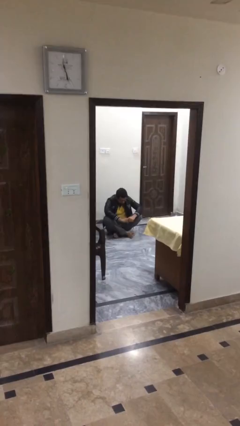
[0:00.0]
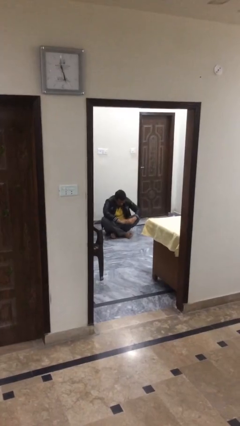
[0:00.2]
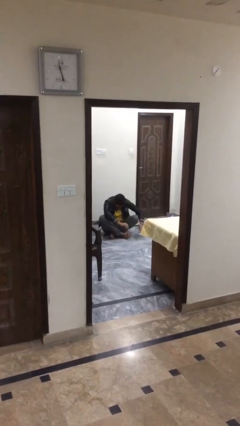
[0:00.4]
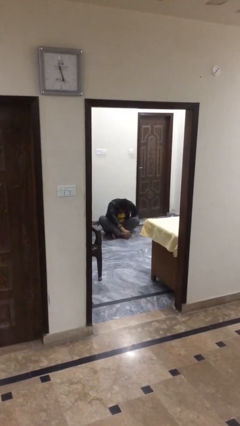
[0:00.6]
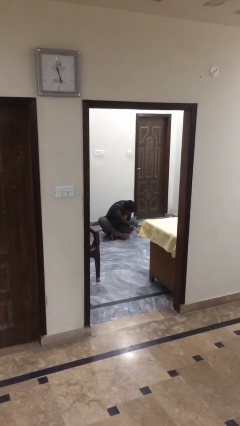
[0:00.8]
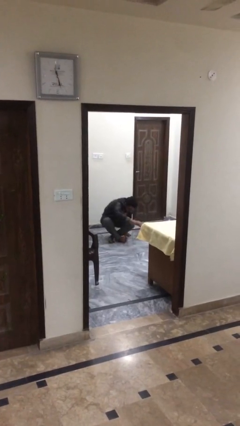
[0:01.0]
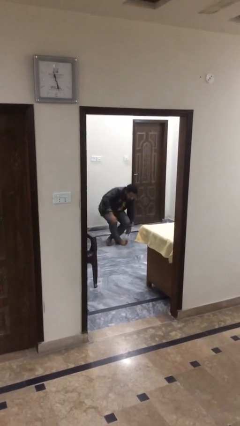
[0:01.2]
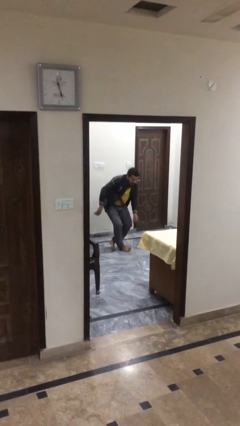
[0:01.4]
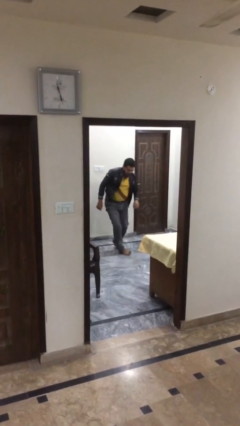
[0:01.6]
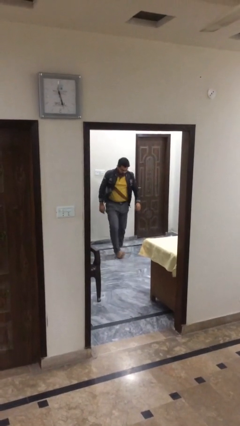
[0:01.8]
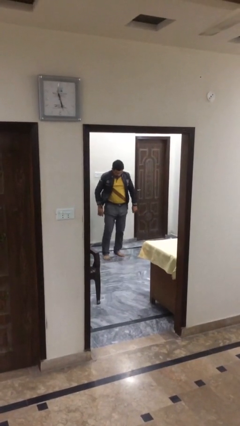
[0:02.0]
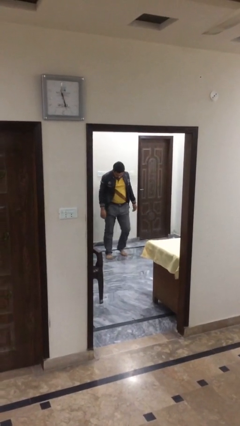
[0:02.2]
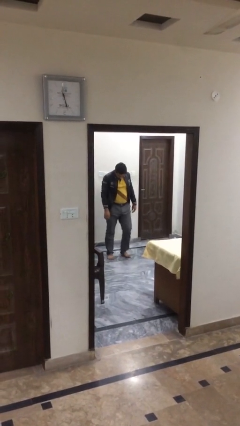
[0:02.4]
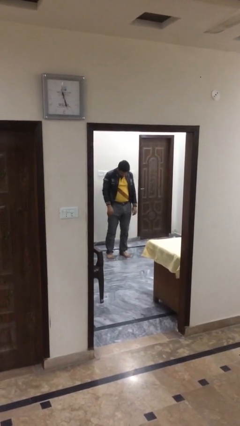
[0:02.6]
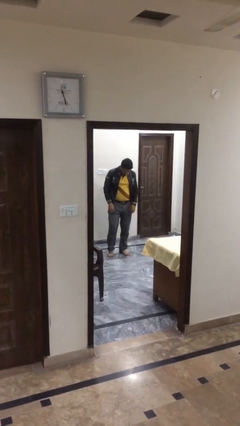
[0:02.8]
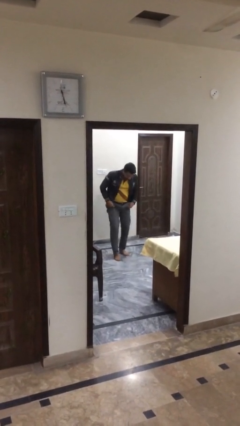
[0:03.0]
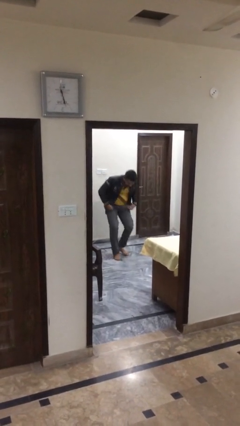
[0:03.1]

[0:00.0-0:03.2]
person stands up

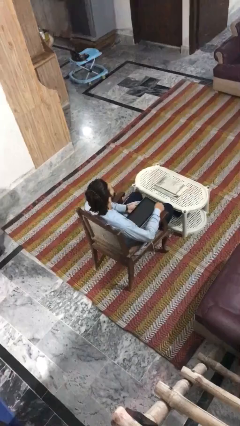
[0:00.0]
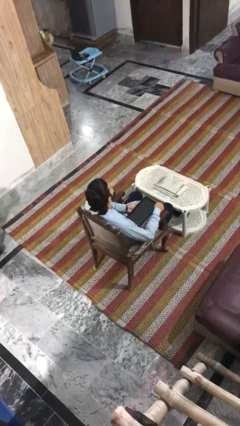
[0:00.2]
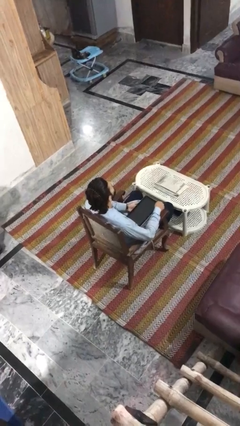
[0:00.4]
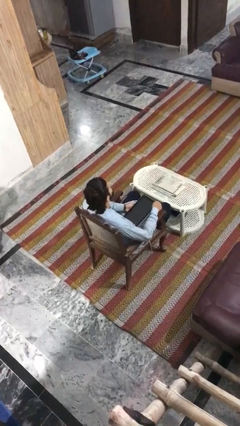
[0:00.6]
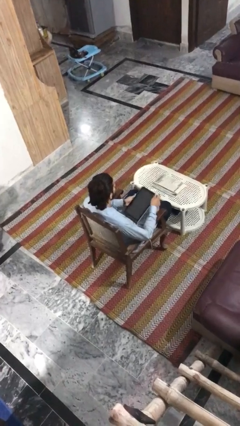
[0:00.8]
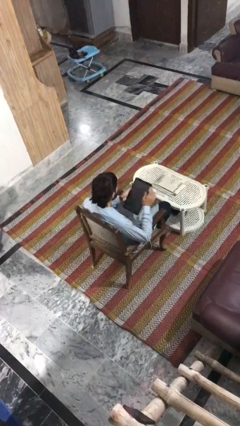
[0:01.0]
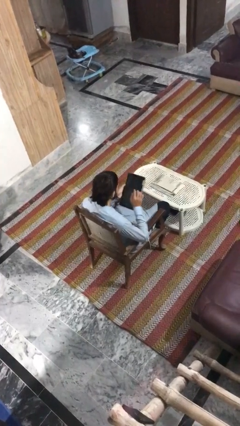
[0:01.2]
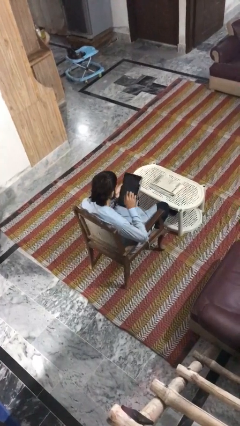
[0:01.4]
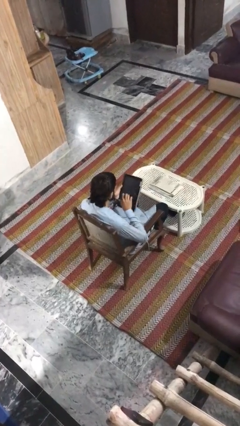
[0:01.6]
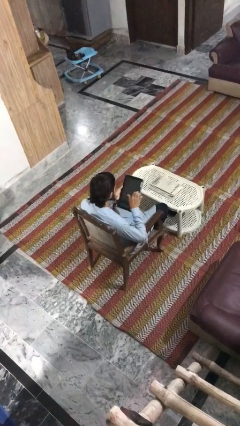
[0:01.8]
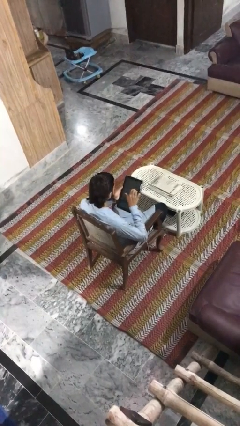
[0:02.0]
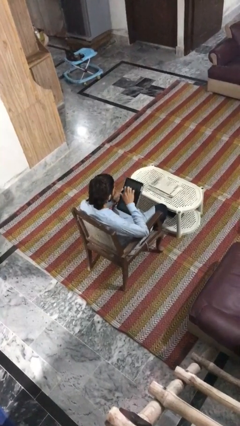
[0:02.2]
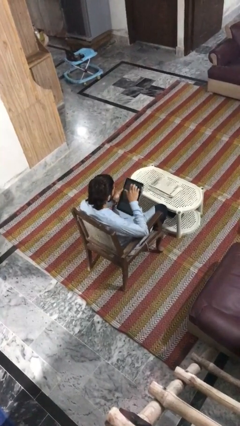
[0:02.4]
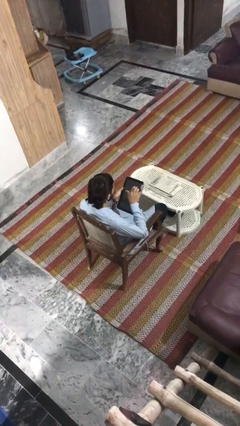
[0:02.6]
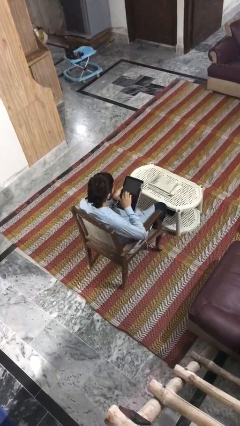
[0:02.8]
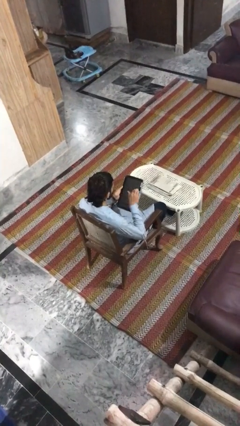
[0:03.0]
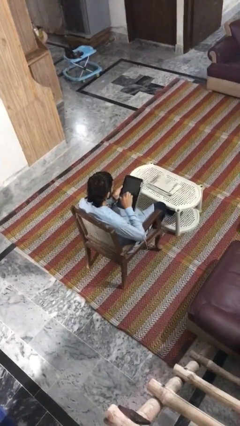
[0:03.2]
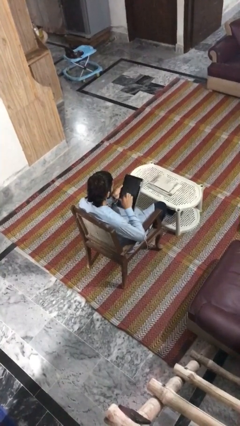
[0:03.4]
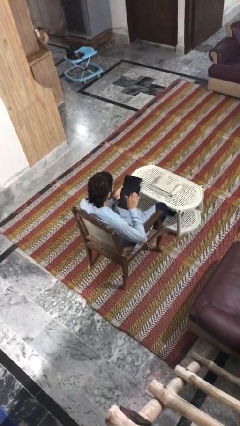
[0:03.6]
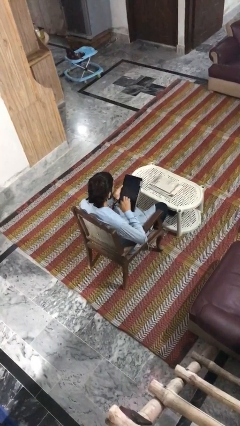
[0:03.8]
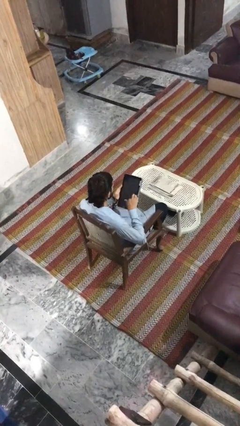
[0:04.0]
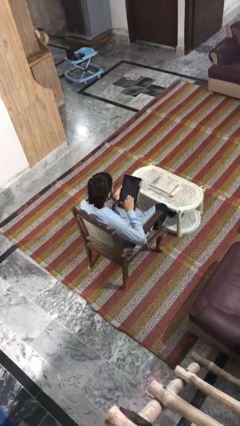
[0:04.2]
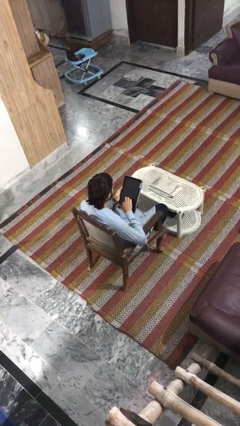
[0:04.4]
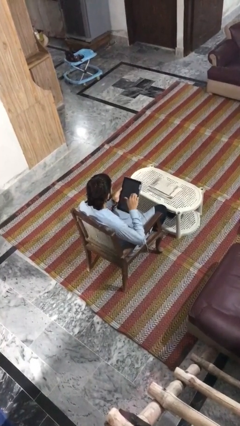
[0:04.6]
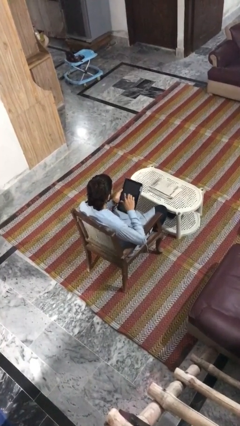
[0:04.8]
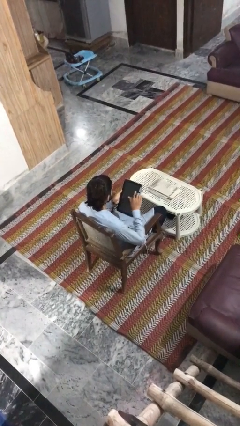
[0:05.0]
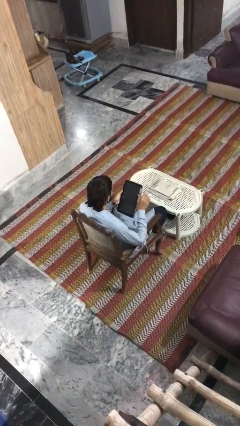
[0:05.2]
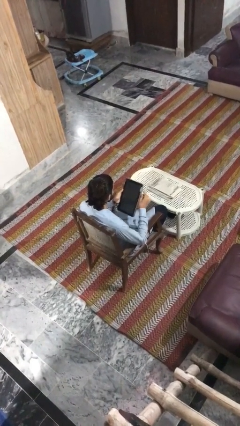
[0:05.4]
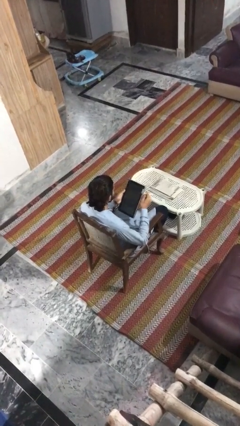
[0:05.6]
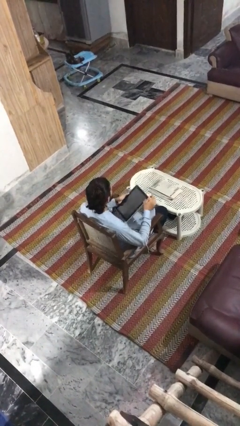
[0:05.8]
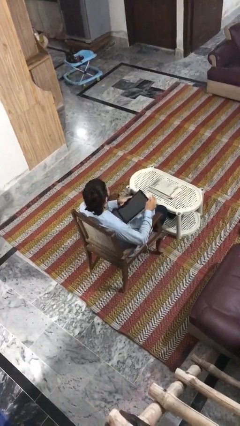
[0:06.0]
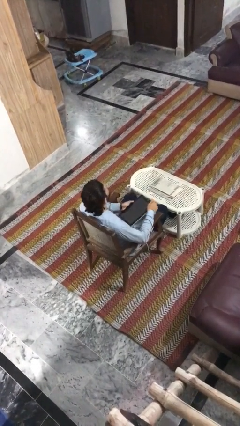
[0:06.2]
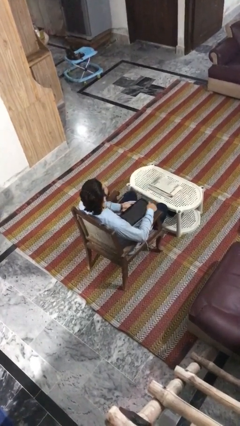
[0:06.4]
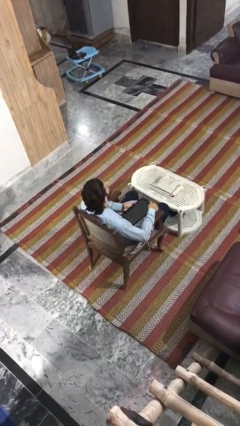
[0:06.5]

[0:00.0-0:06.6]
person interacts with tablet

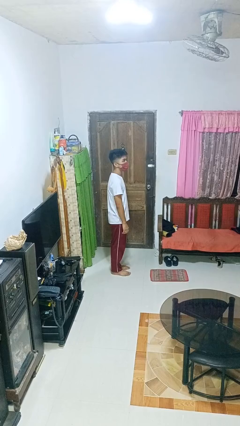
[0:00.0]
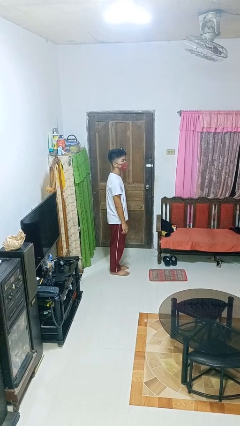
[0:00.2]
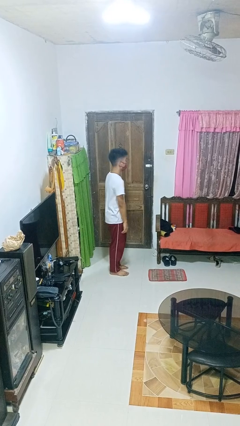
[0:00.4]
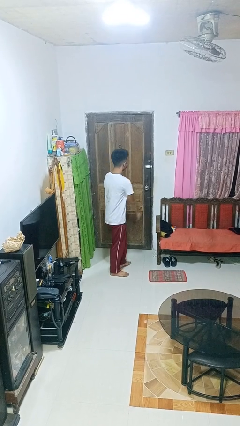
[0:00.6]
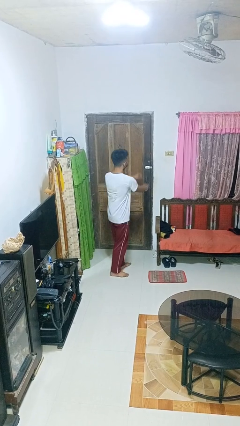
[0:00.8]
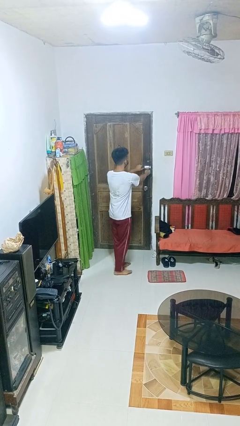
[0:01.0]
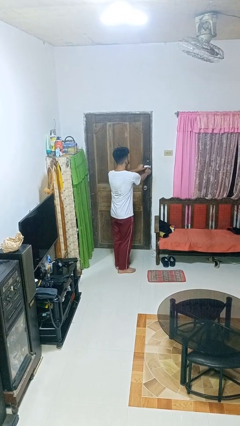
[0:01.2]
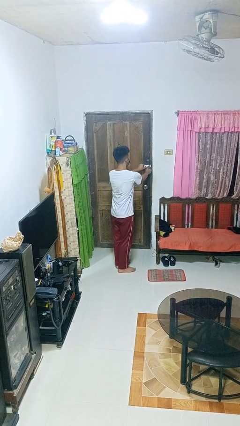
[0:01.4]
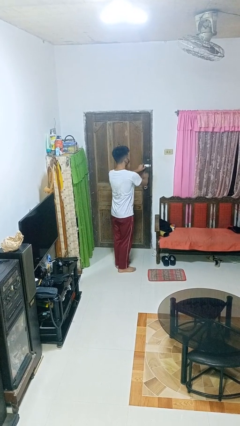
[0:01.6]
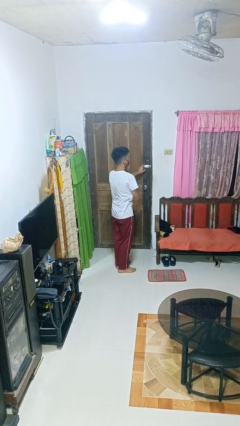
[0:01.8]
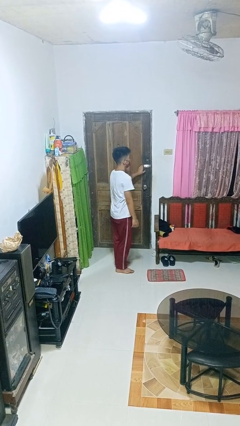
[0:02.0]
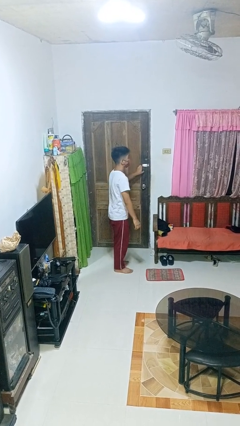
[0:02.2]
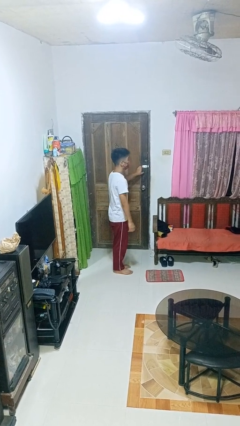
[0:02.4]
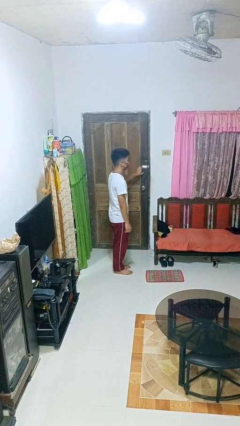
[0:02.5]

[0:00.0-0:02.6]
person unlocks door with keys

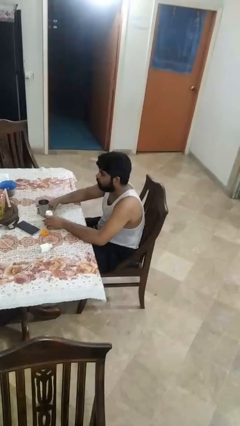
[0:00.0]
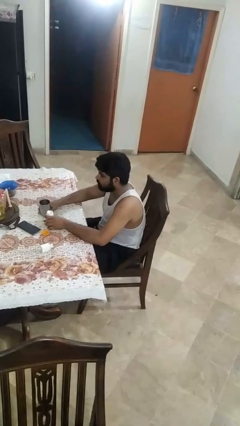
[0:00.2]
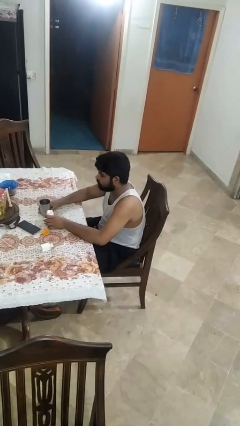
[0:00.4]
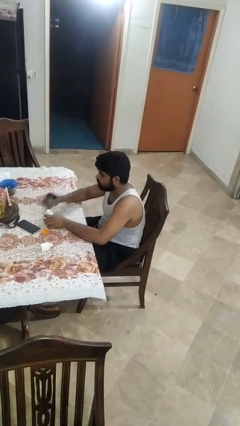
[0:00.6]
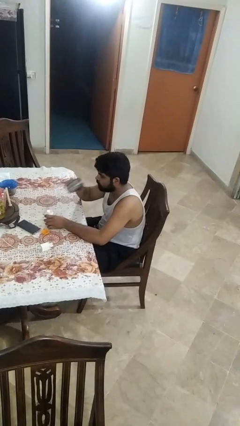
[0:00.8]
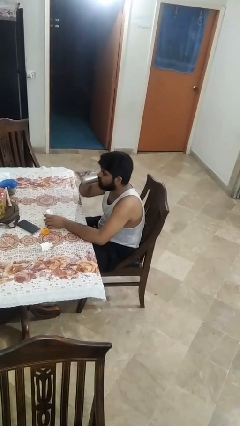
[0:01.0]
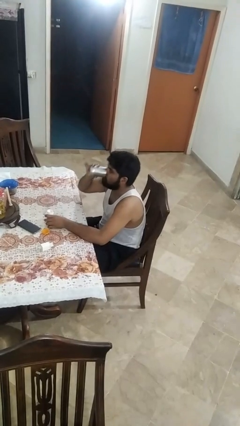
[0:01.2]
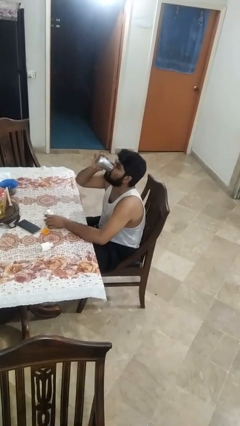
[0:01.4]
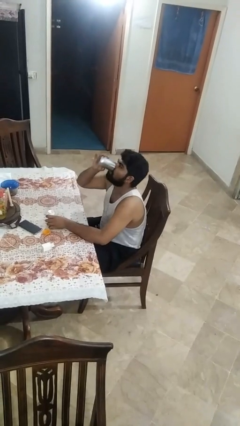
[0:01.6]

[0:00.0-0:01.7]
person drinks from cup

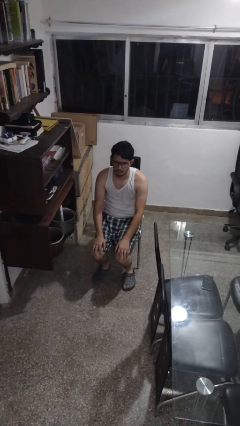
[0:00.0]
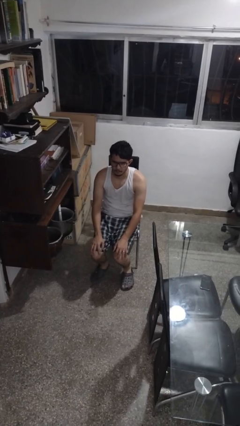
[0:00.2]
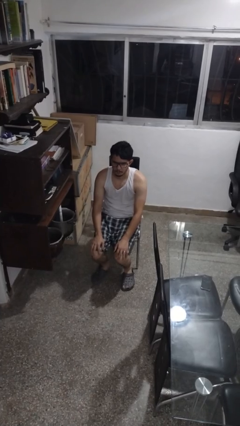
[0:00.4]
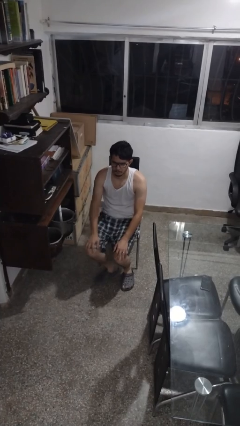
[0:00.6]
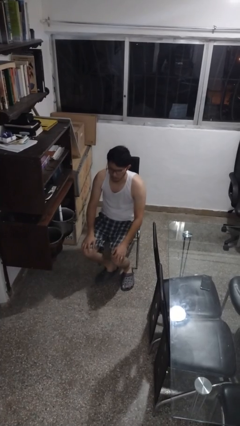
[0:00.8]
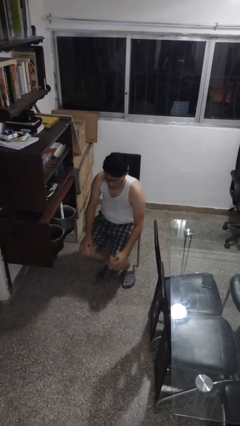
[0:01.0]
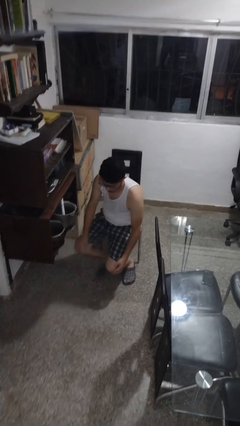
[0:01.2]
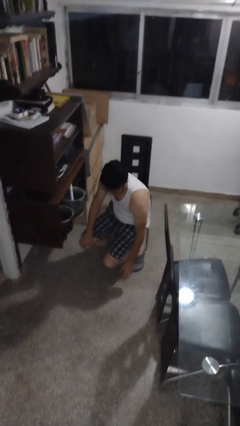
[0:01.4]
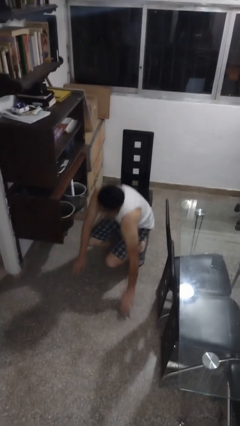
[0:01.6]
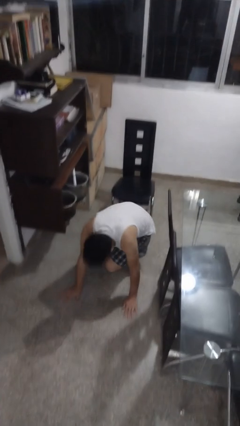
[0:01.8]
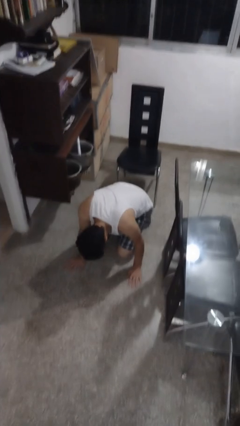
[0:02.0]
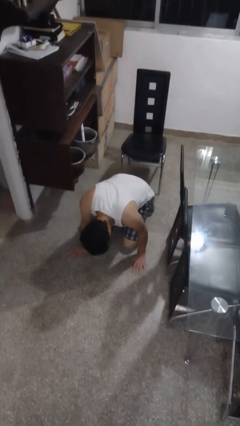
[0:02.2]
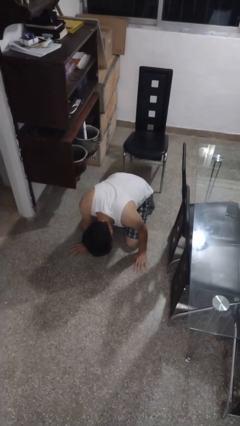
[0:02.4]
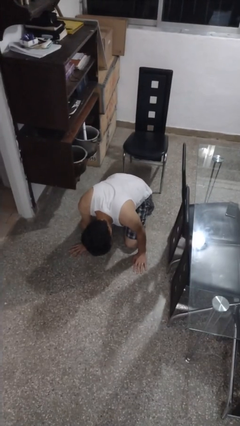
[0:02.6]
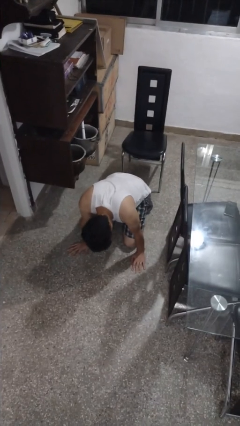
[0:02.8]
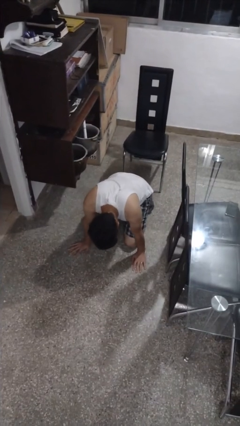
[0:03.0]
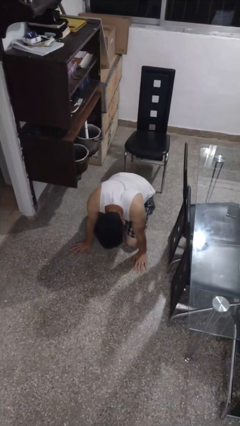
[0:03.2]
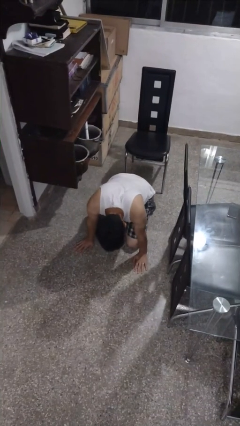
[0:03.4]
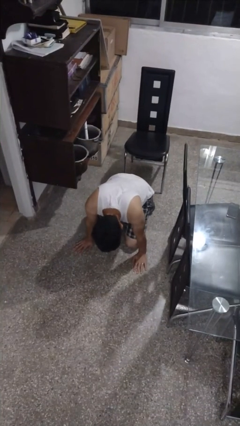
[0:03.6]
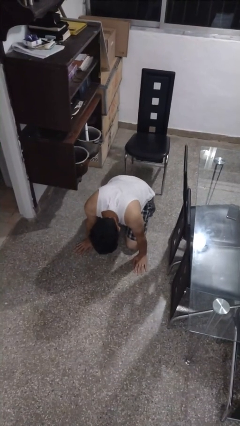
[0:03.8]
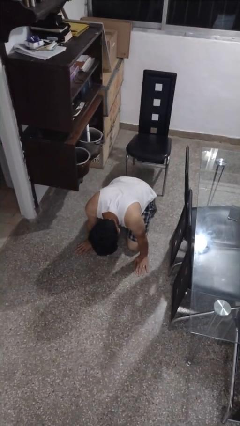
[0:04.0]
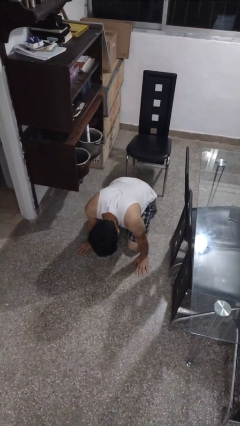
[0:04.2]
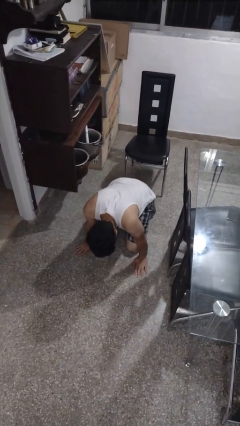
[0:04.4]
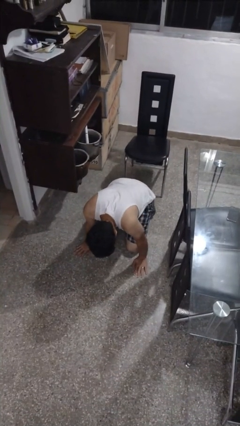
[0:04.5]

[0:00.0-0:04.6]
person falls from chair
